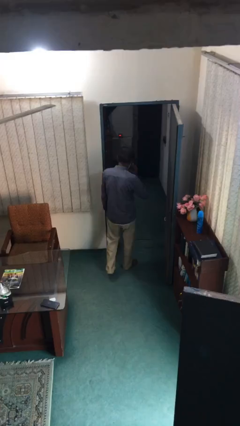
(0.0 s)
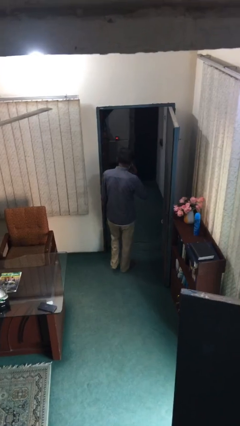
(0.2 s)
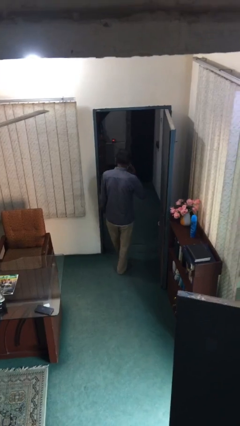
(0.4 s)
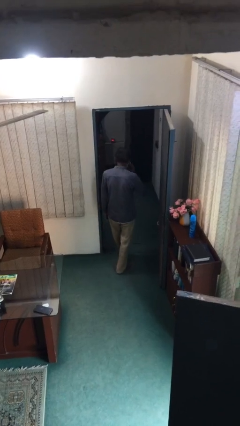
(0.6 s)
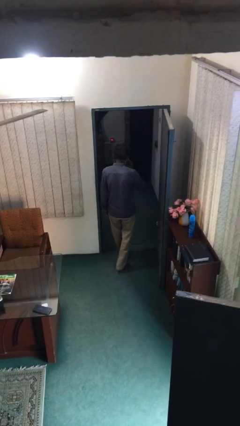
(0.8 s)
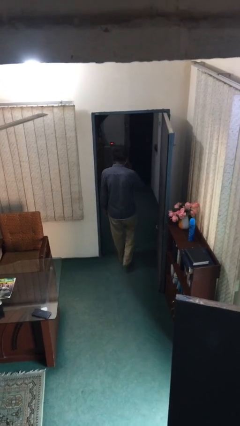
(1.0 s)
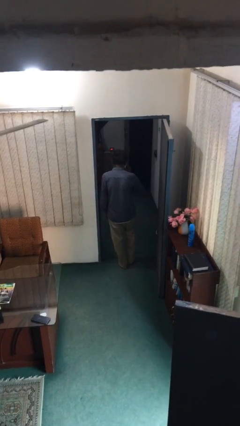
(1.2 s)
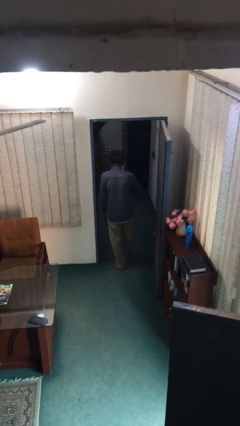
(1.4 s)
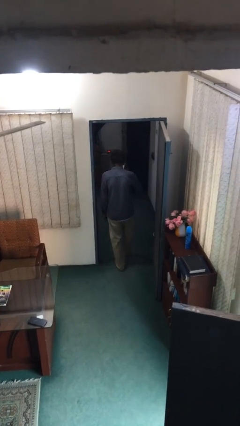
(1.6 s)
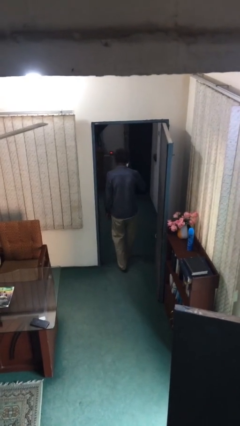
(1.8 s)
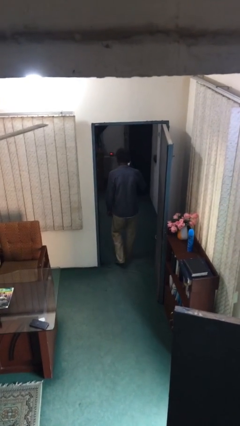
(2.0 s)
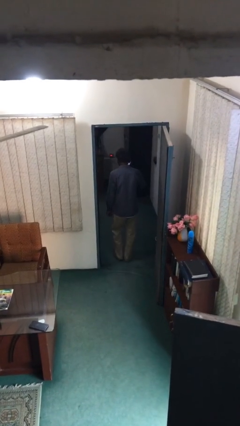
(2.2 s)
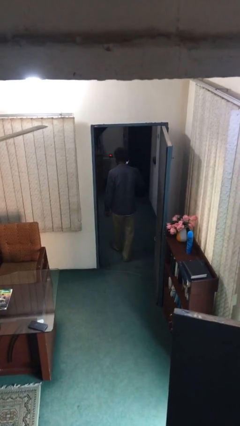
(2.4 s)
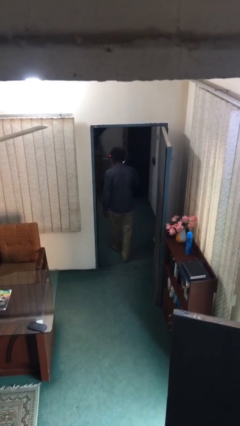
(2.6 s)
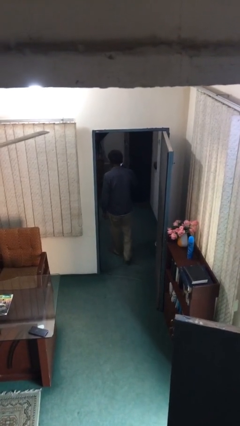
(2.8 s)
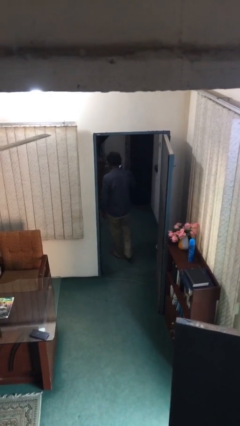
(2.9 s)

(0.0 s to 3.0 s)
person exits scene through structure

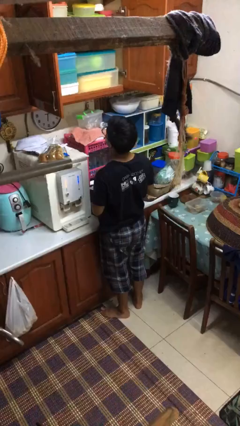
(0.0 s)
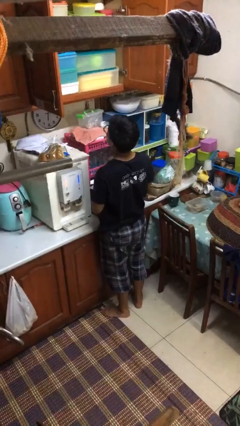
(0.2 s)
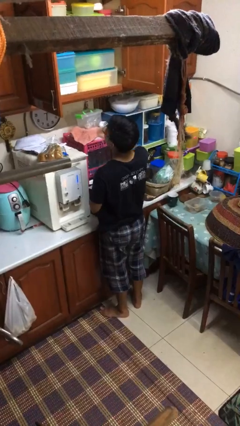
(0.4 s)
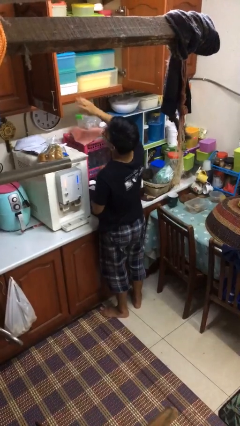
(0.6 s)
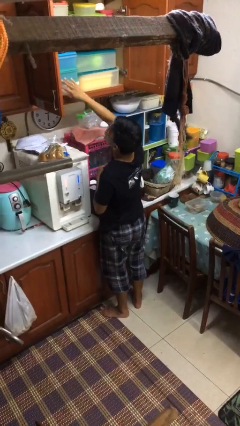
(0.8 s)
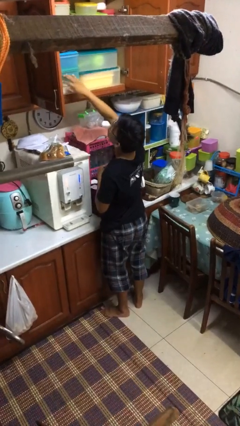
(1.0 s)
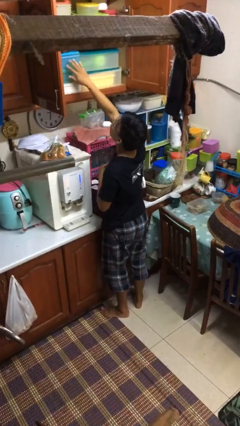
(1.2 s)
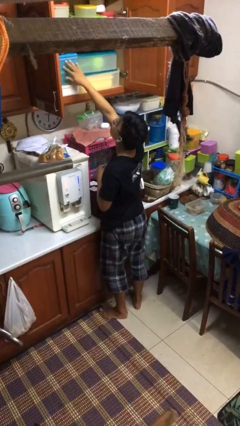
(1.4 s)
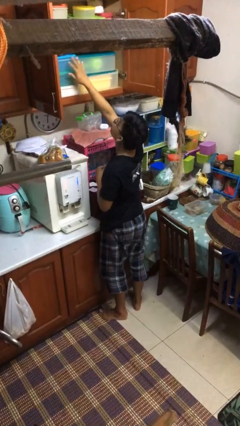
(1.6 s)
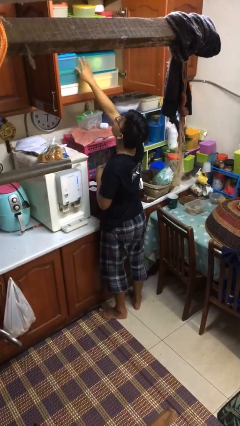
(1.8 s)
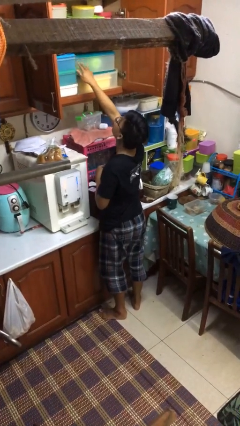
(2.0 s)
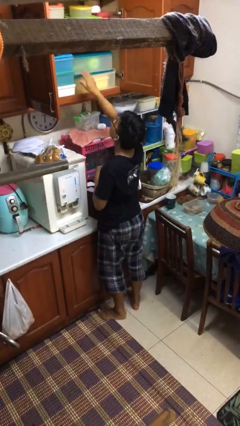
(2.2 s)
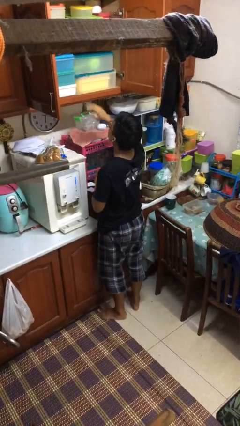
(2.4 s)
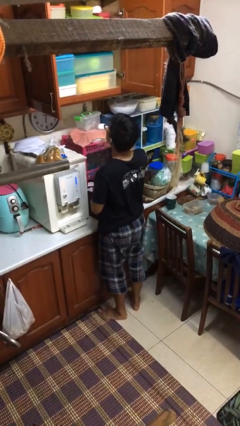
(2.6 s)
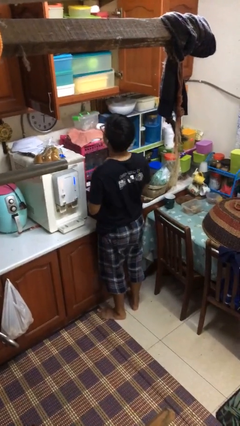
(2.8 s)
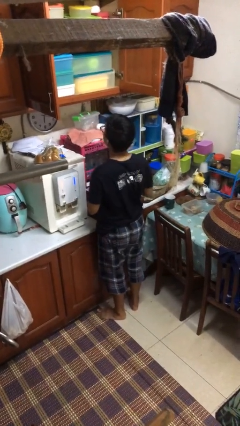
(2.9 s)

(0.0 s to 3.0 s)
person searches in kitchen drawer

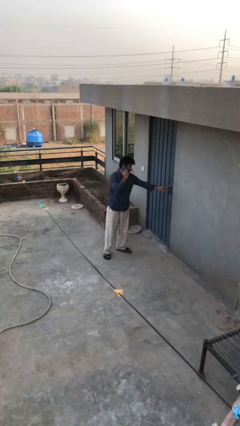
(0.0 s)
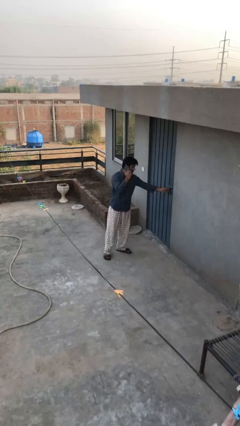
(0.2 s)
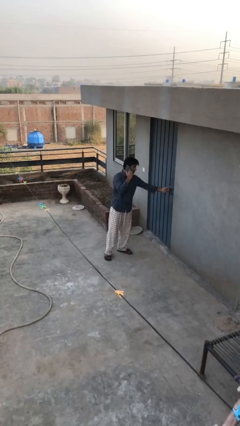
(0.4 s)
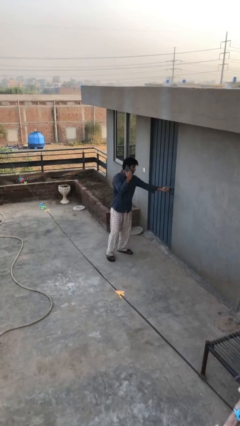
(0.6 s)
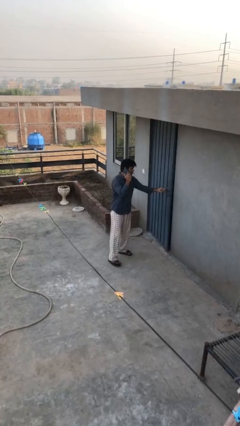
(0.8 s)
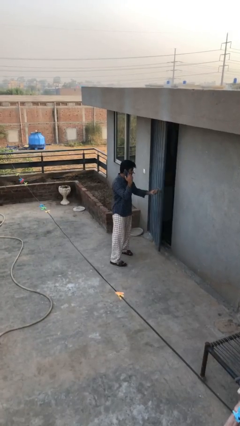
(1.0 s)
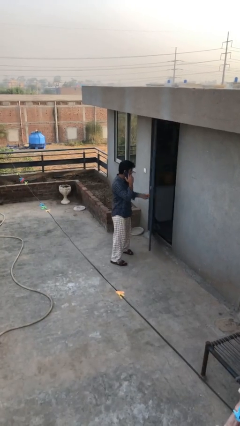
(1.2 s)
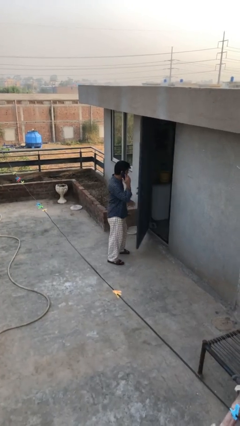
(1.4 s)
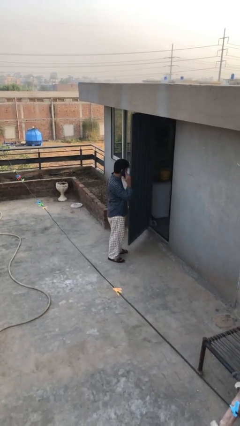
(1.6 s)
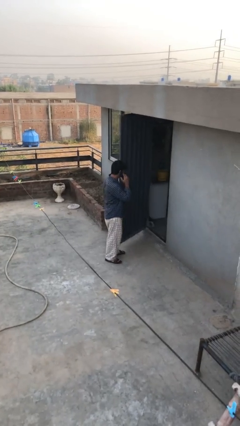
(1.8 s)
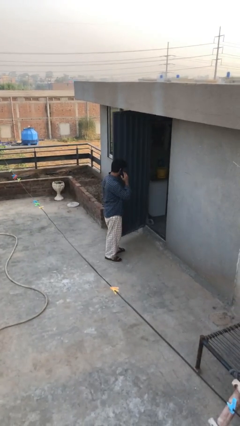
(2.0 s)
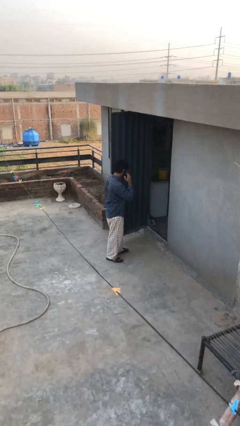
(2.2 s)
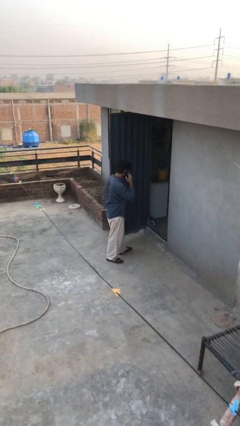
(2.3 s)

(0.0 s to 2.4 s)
person opens facility door

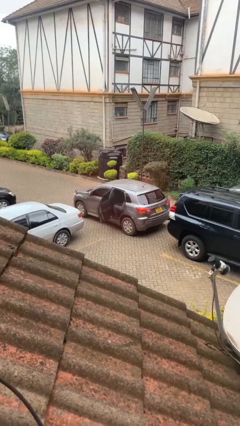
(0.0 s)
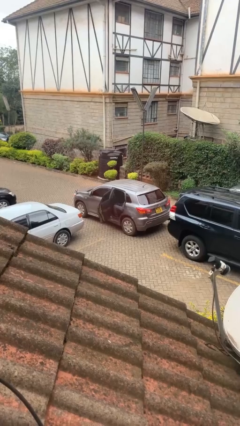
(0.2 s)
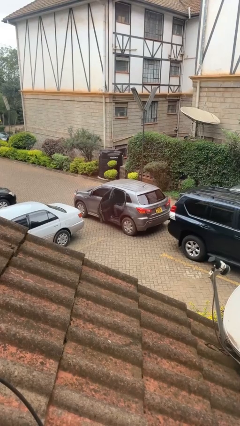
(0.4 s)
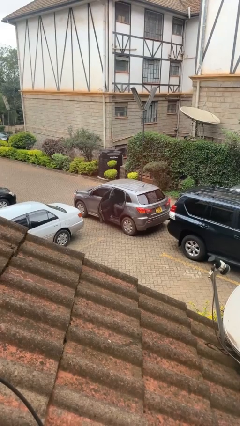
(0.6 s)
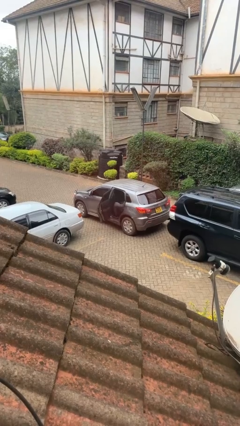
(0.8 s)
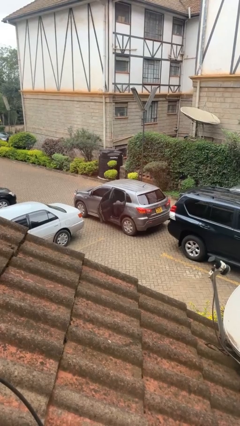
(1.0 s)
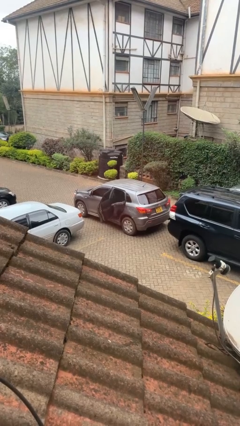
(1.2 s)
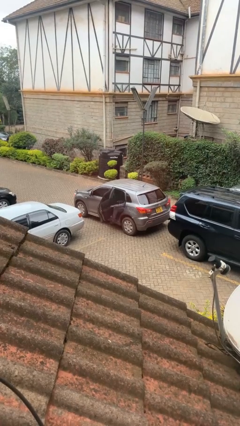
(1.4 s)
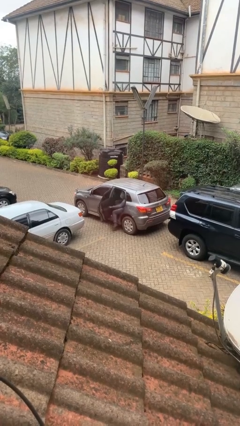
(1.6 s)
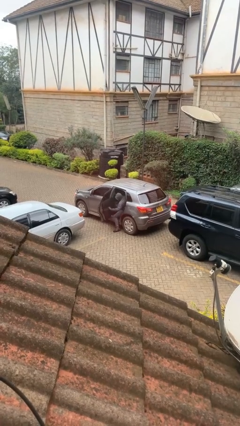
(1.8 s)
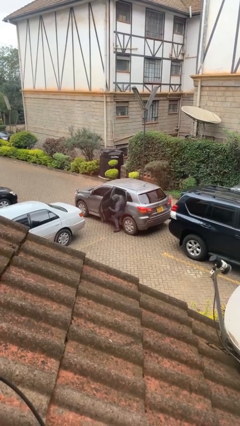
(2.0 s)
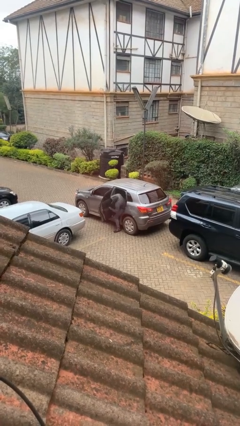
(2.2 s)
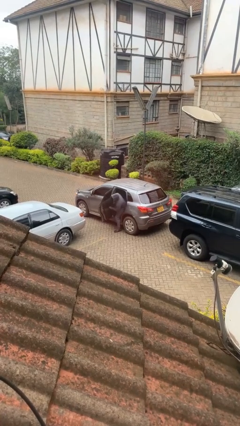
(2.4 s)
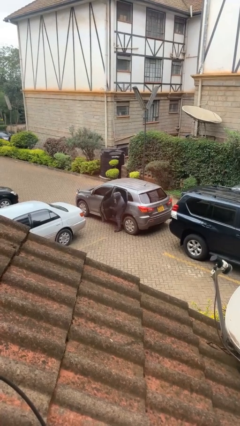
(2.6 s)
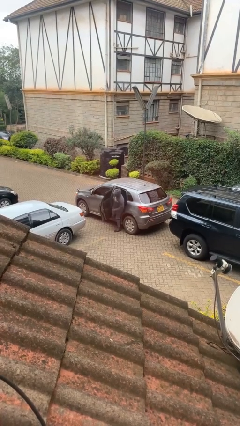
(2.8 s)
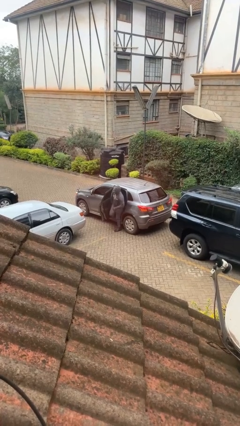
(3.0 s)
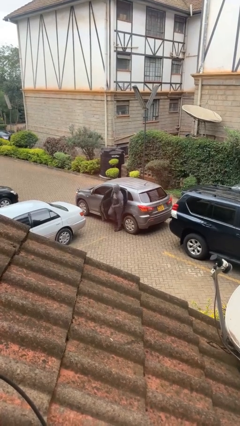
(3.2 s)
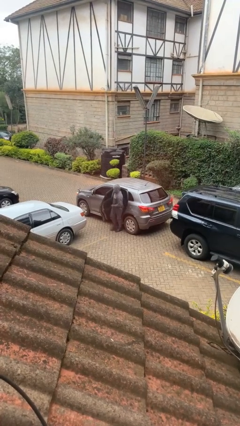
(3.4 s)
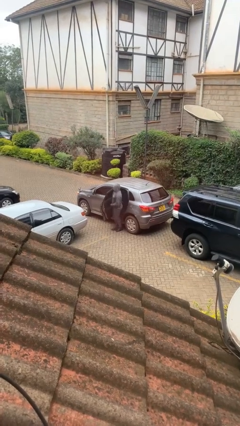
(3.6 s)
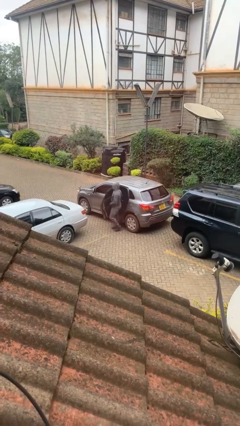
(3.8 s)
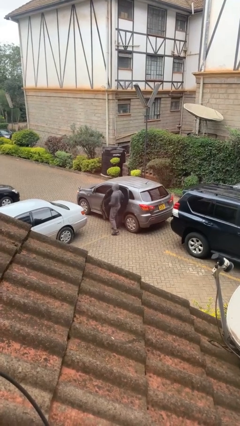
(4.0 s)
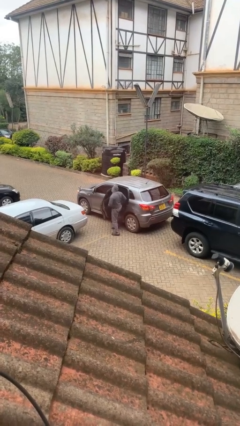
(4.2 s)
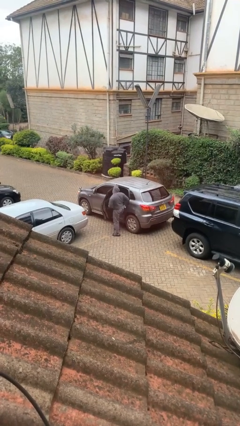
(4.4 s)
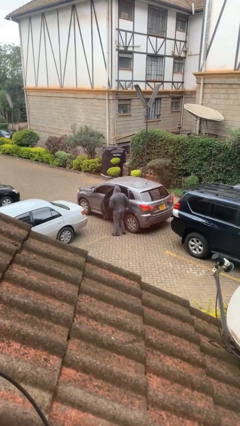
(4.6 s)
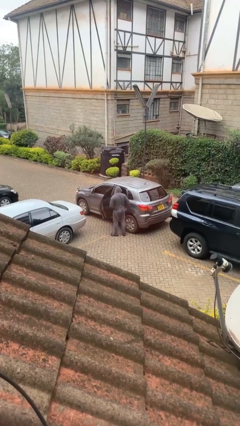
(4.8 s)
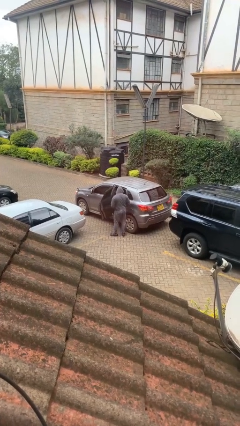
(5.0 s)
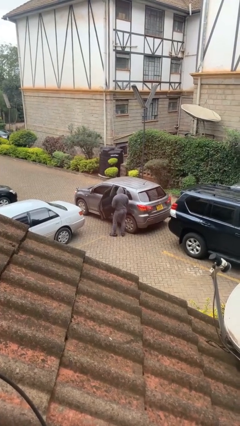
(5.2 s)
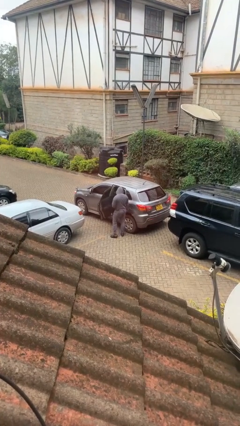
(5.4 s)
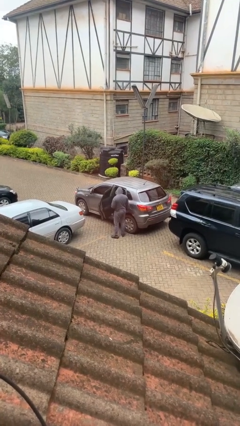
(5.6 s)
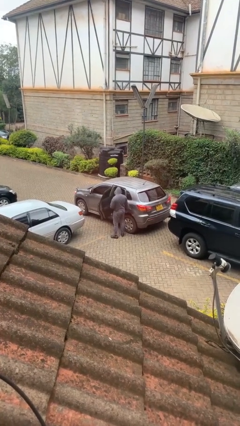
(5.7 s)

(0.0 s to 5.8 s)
person exits car

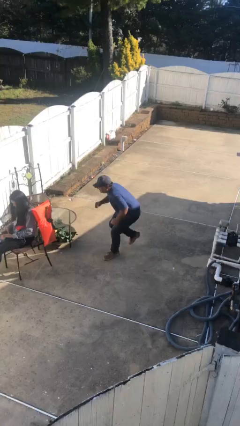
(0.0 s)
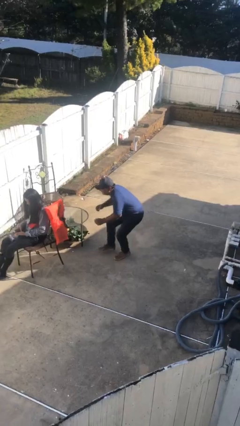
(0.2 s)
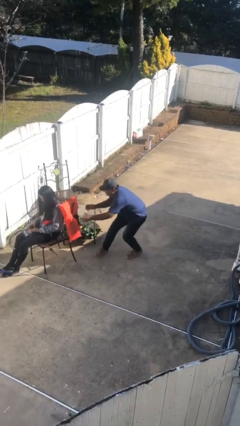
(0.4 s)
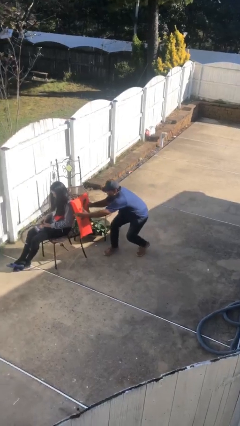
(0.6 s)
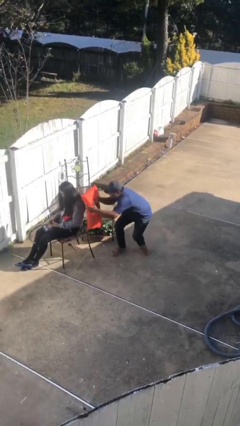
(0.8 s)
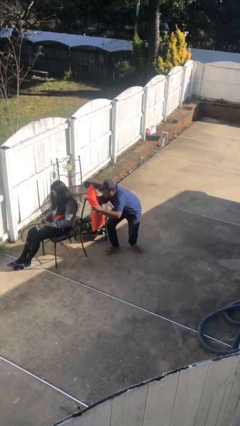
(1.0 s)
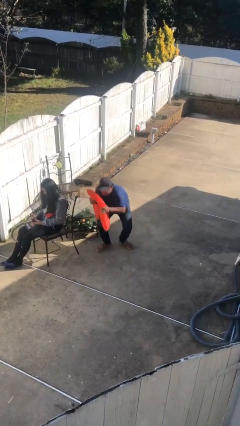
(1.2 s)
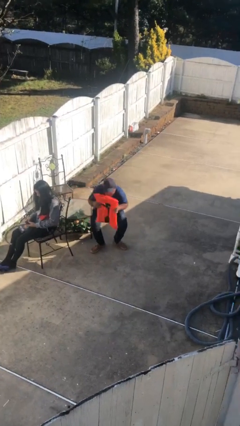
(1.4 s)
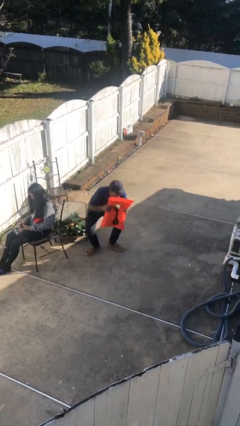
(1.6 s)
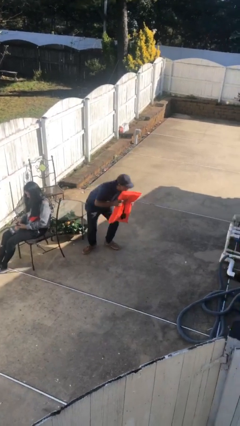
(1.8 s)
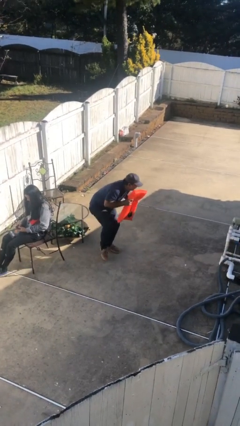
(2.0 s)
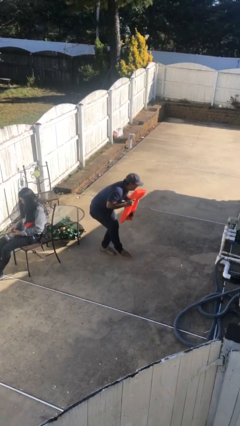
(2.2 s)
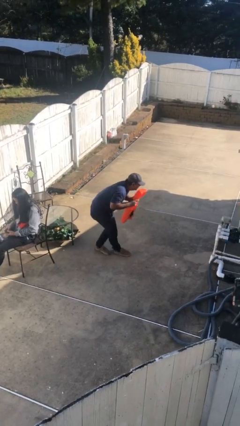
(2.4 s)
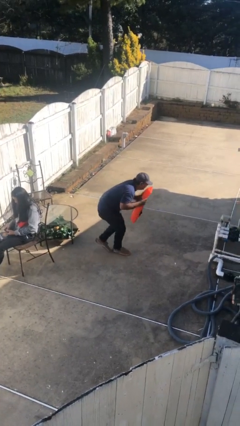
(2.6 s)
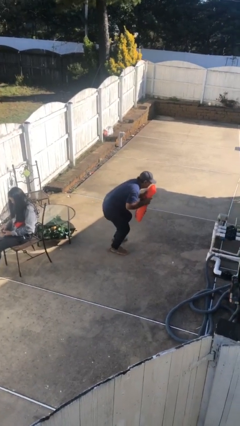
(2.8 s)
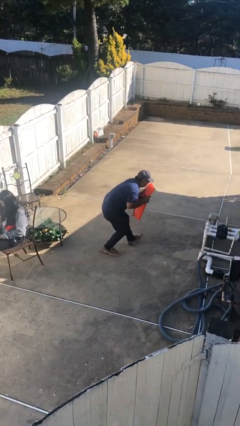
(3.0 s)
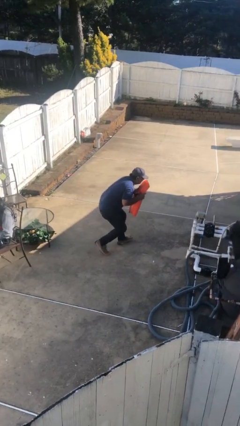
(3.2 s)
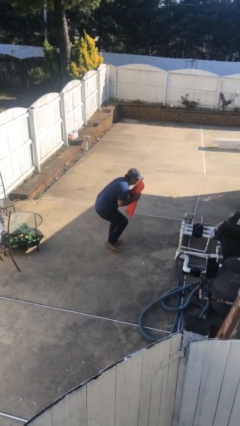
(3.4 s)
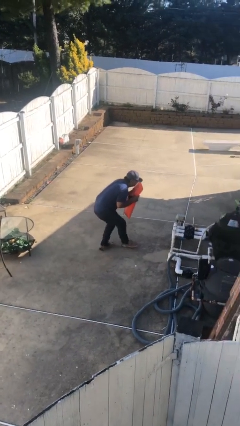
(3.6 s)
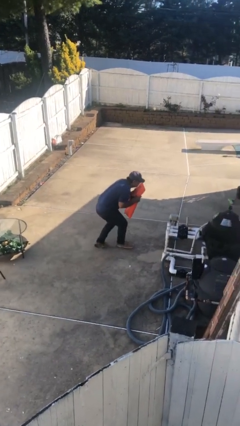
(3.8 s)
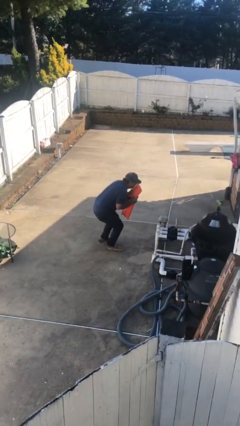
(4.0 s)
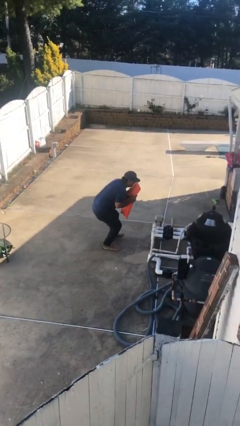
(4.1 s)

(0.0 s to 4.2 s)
person steals object from person
